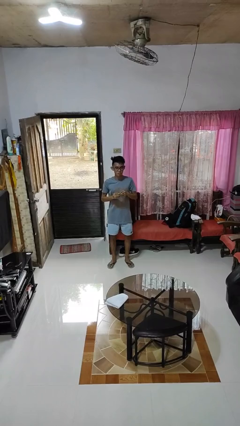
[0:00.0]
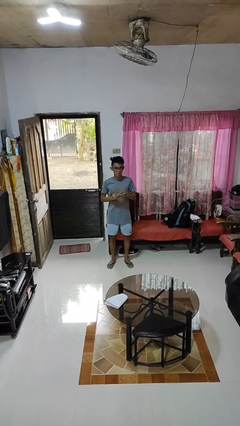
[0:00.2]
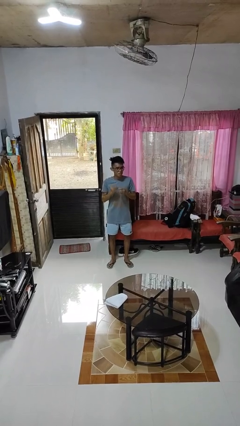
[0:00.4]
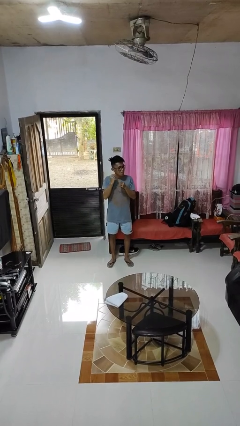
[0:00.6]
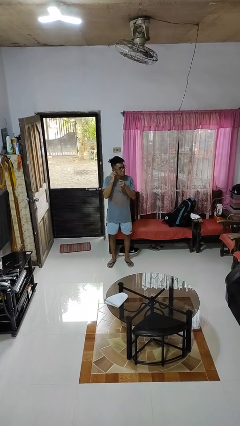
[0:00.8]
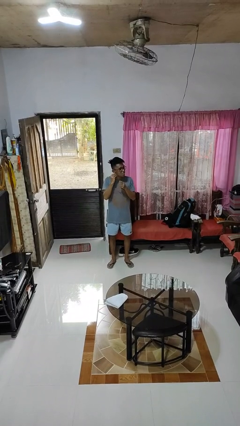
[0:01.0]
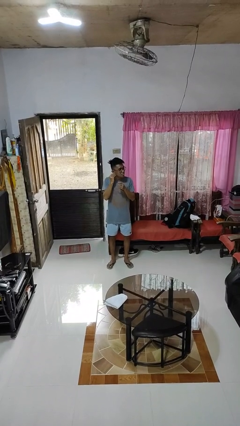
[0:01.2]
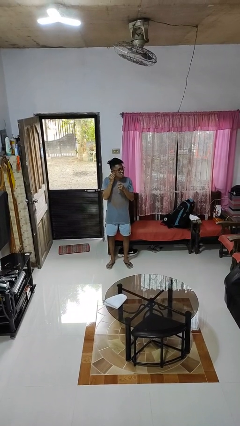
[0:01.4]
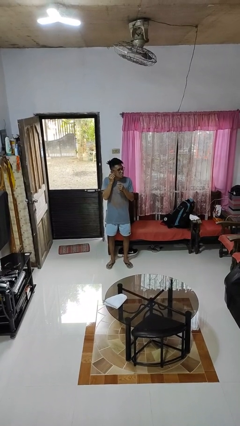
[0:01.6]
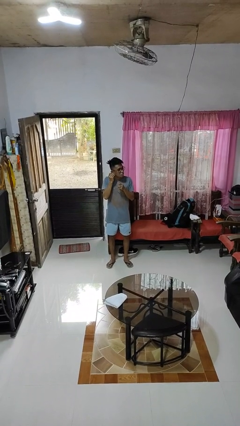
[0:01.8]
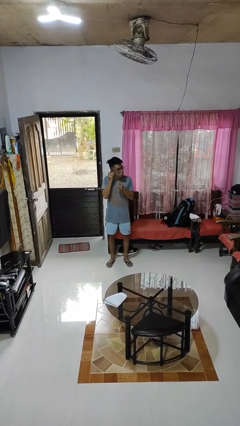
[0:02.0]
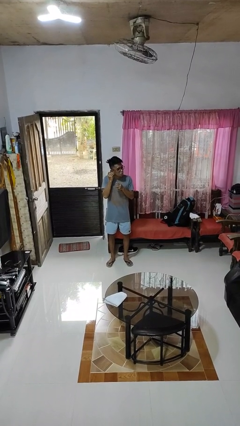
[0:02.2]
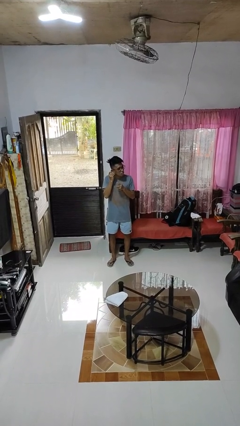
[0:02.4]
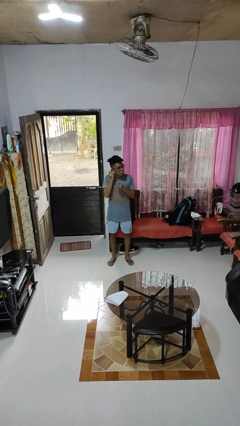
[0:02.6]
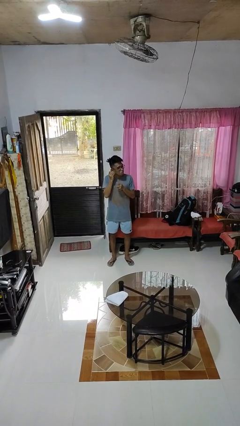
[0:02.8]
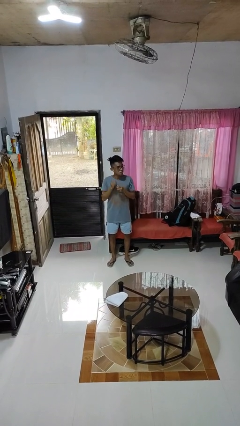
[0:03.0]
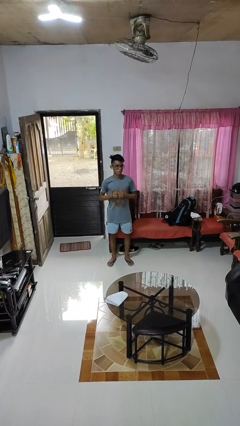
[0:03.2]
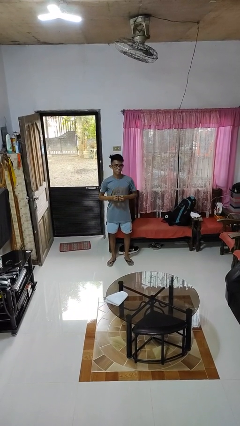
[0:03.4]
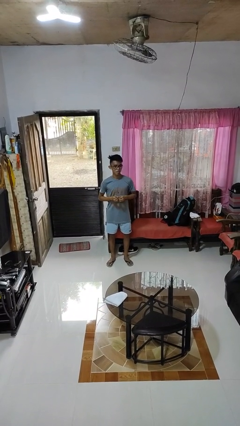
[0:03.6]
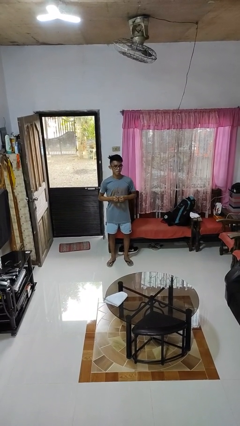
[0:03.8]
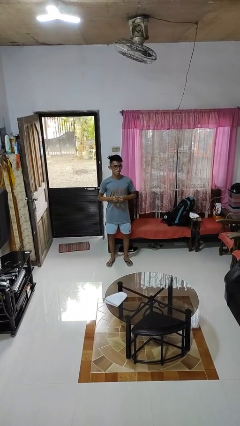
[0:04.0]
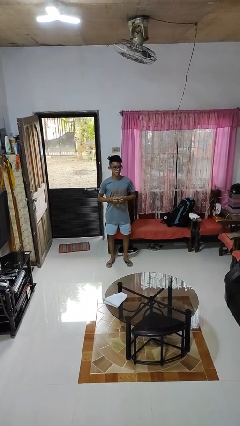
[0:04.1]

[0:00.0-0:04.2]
person puts on earrings

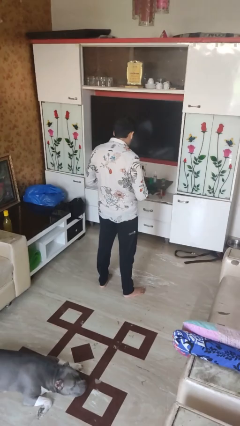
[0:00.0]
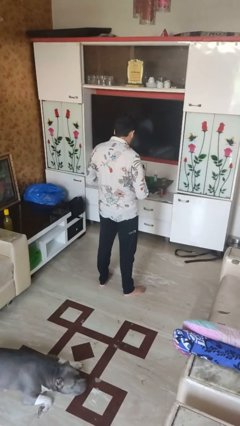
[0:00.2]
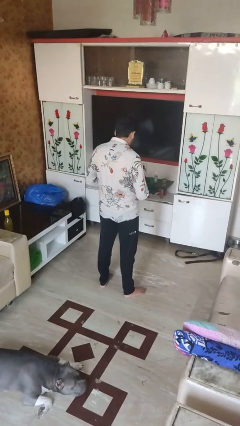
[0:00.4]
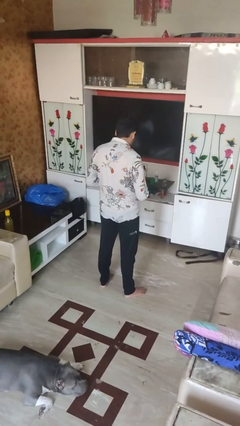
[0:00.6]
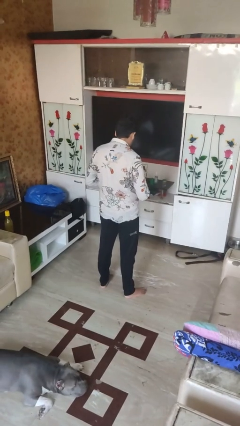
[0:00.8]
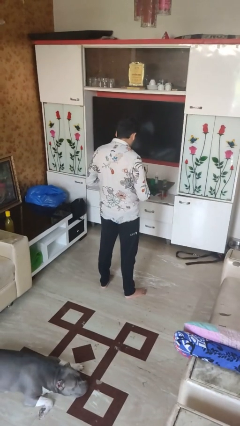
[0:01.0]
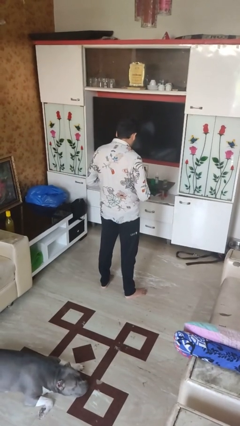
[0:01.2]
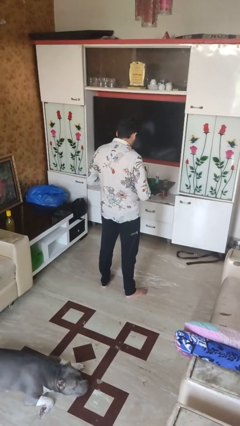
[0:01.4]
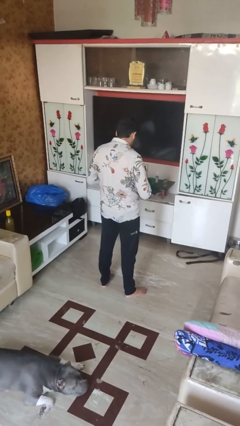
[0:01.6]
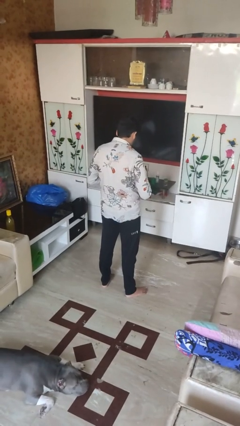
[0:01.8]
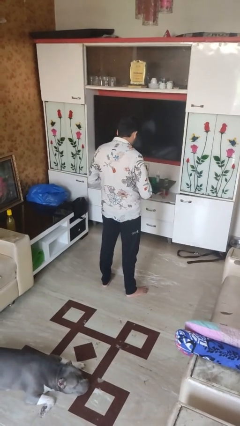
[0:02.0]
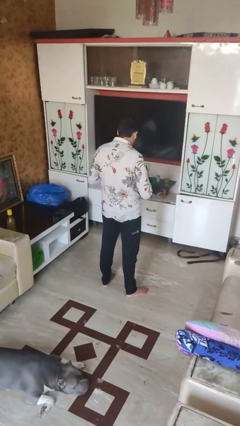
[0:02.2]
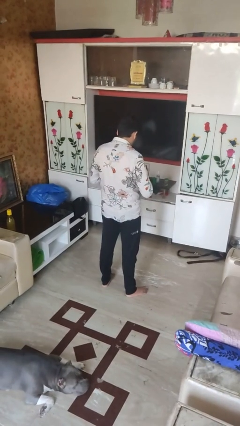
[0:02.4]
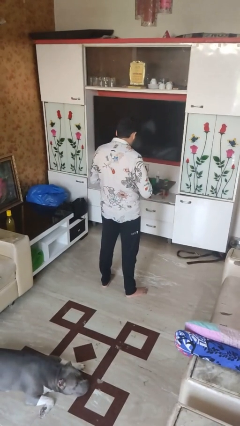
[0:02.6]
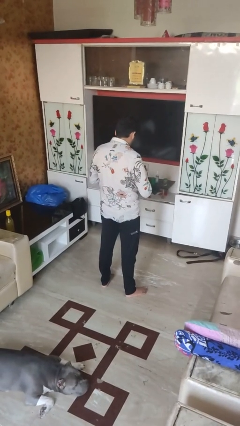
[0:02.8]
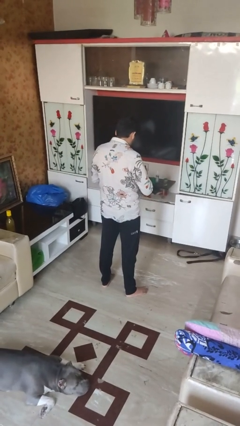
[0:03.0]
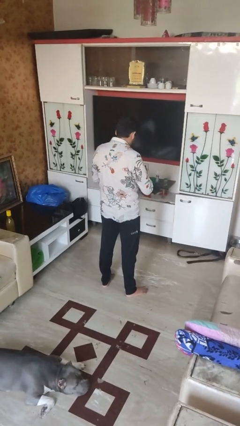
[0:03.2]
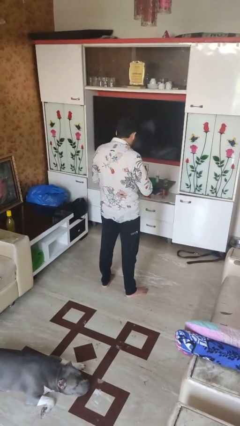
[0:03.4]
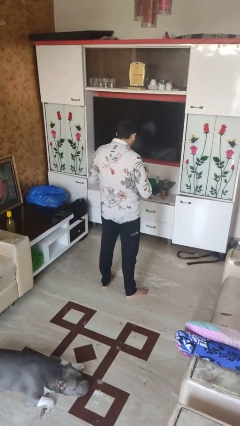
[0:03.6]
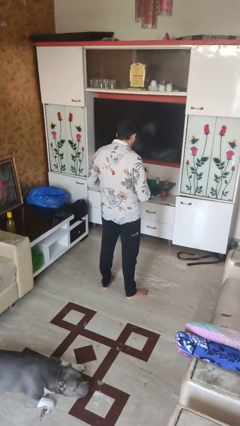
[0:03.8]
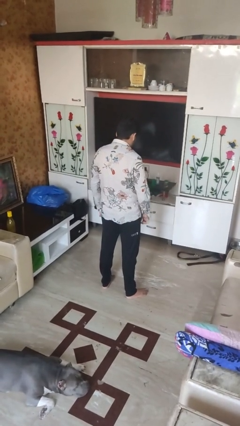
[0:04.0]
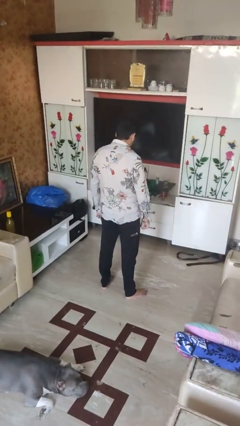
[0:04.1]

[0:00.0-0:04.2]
person buttons shirt

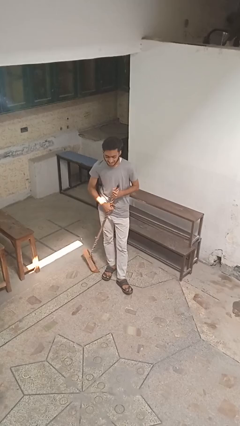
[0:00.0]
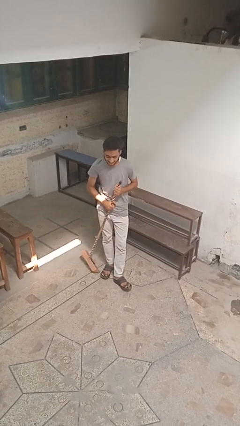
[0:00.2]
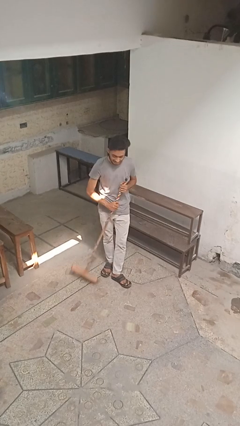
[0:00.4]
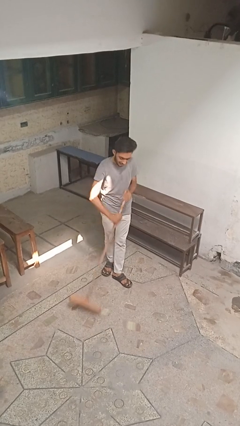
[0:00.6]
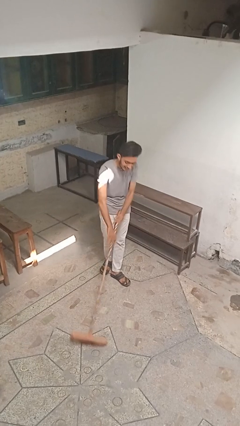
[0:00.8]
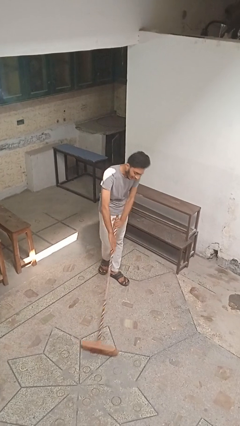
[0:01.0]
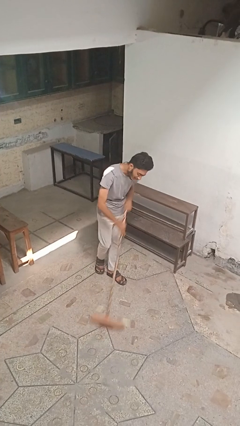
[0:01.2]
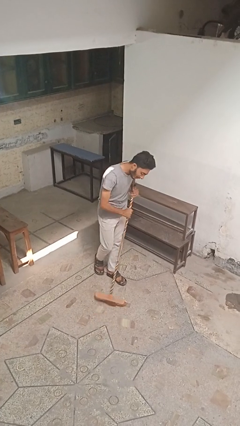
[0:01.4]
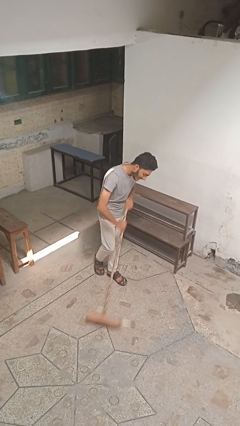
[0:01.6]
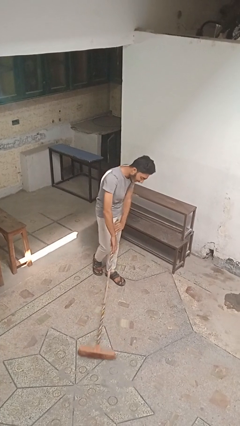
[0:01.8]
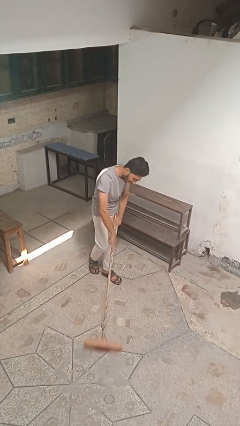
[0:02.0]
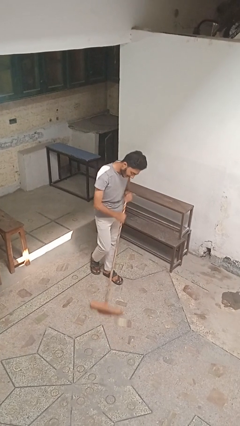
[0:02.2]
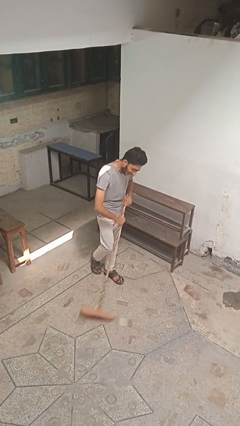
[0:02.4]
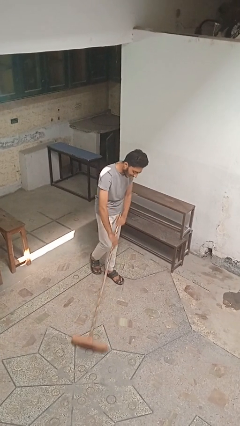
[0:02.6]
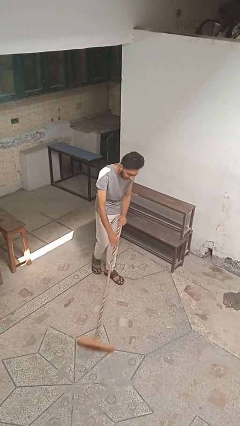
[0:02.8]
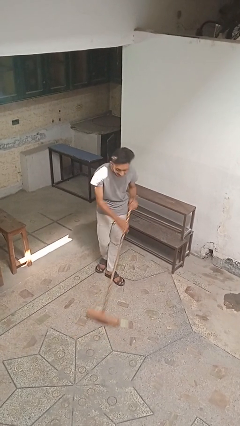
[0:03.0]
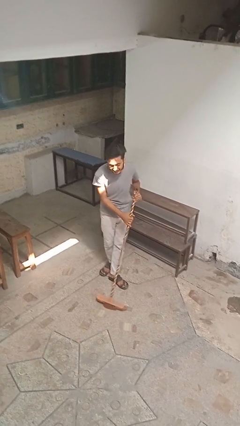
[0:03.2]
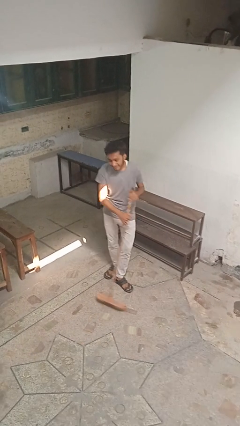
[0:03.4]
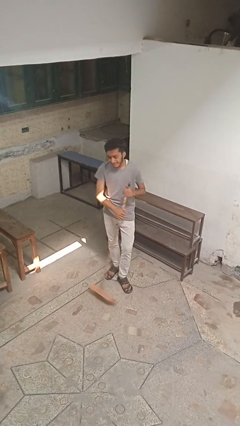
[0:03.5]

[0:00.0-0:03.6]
person sweeps floor

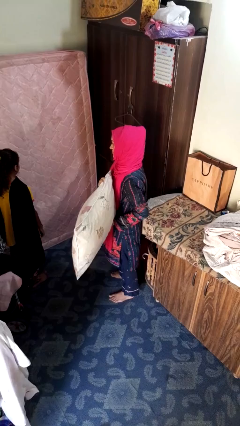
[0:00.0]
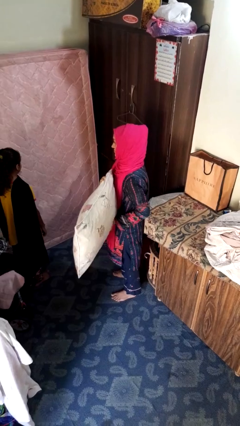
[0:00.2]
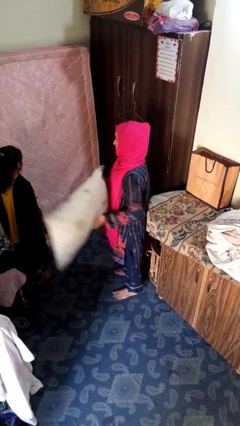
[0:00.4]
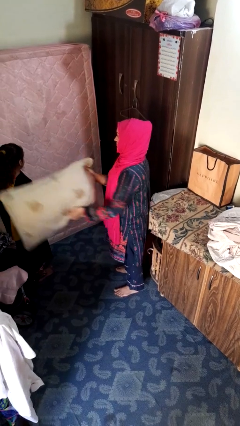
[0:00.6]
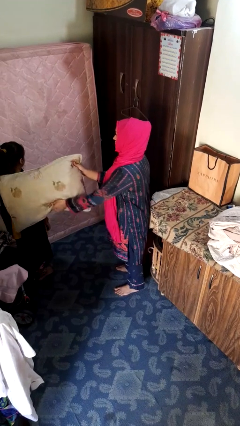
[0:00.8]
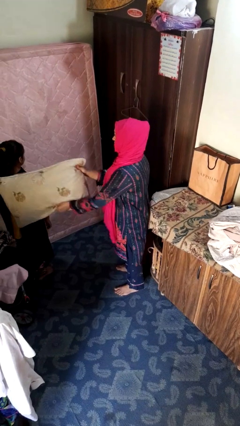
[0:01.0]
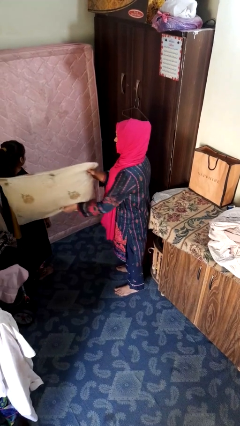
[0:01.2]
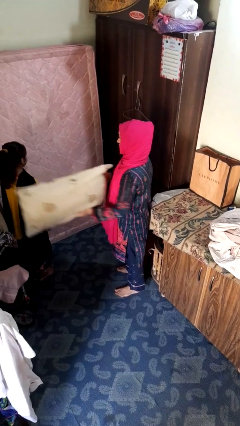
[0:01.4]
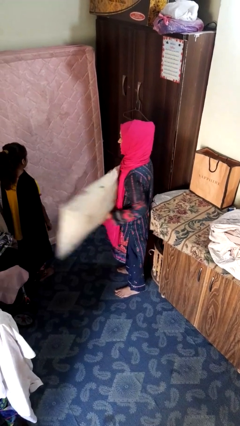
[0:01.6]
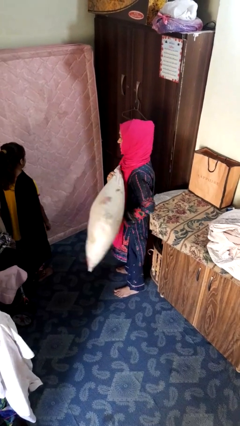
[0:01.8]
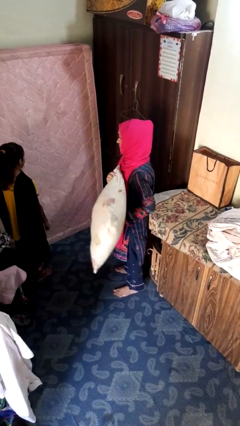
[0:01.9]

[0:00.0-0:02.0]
person hits person with pillow

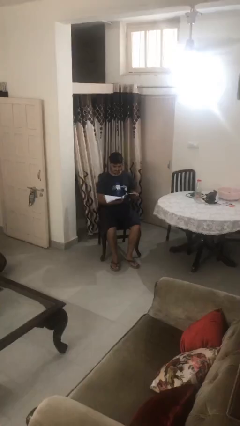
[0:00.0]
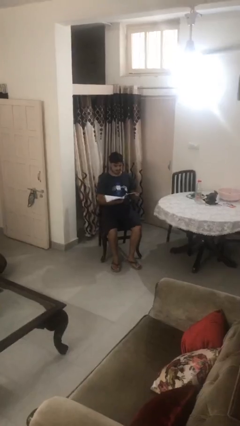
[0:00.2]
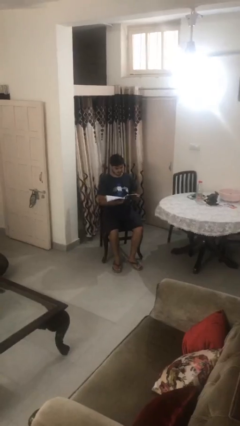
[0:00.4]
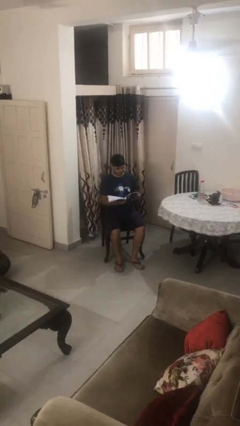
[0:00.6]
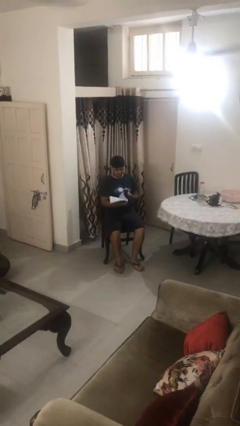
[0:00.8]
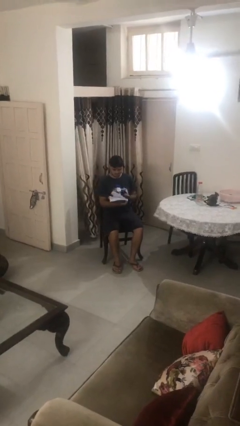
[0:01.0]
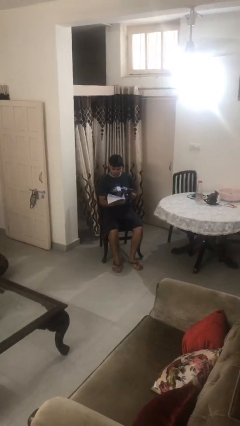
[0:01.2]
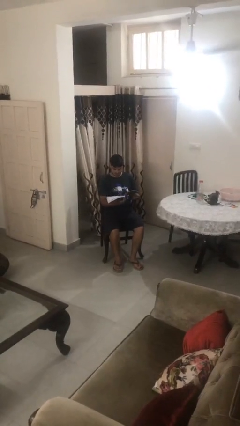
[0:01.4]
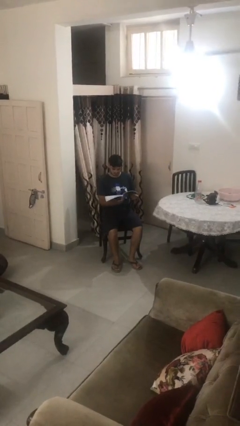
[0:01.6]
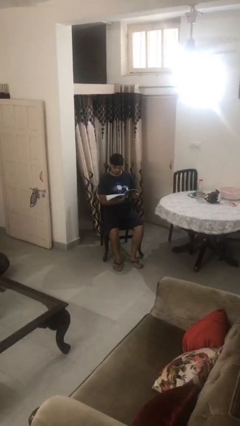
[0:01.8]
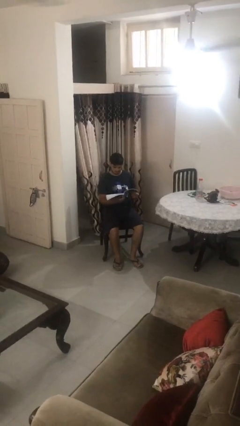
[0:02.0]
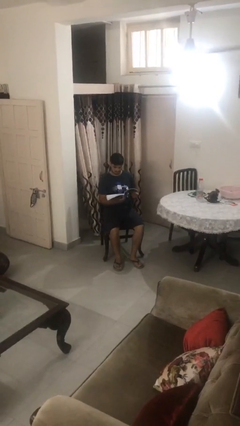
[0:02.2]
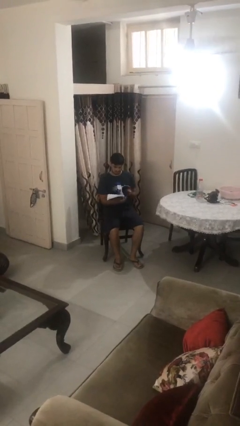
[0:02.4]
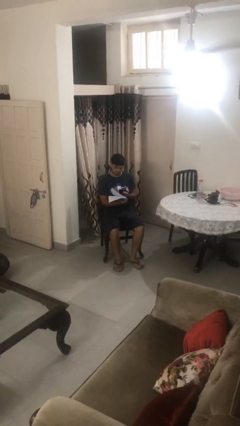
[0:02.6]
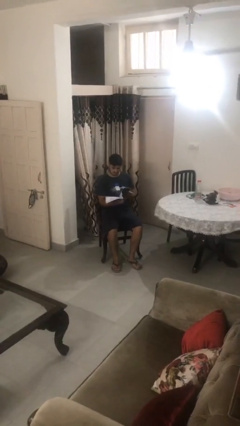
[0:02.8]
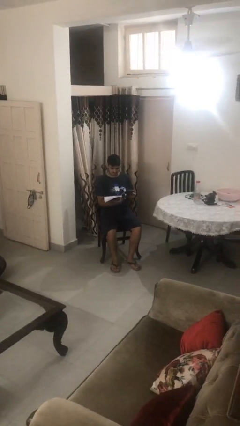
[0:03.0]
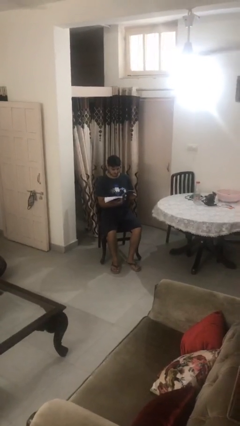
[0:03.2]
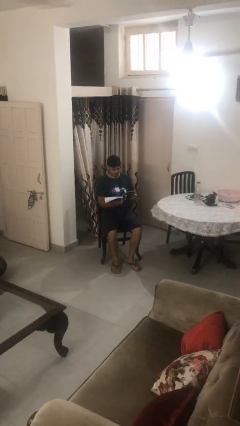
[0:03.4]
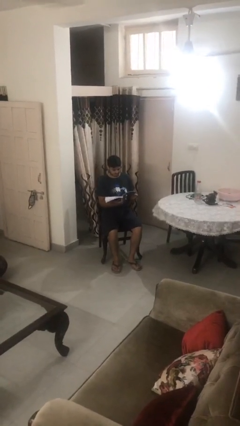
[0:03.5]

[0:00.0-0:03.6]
person reads document
